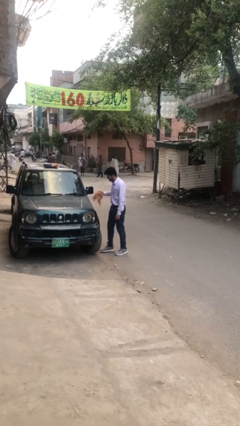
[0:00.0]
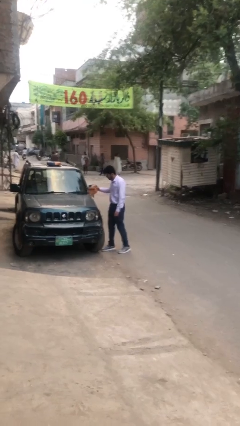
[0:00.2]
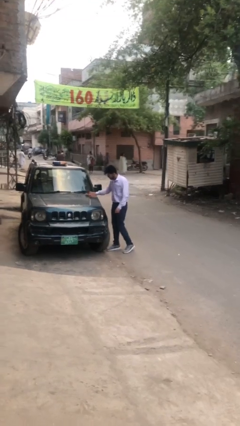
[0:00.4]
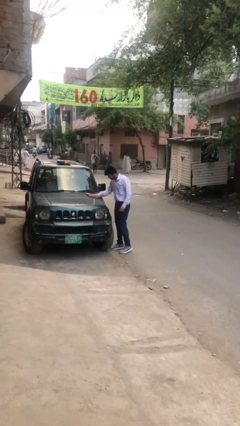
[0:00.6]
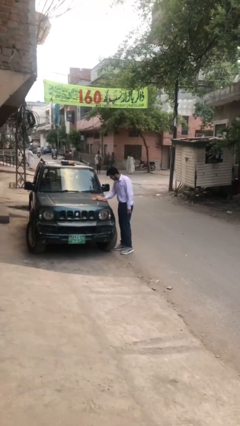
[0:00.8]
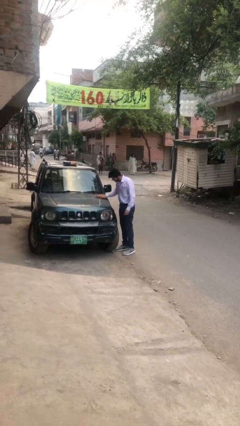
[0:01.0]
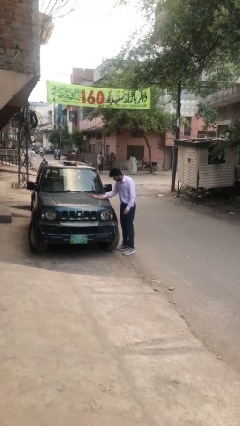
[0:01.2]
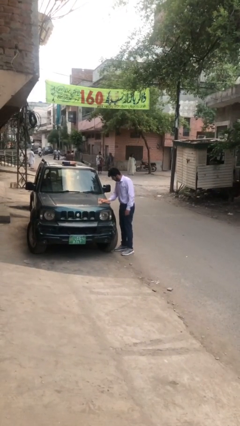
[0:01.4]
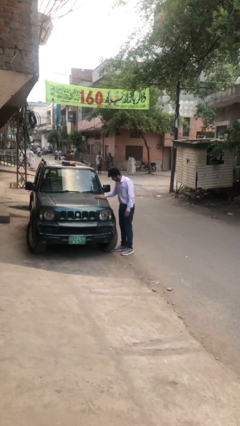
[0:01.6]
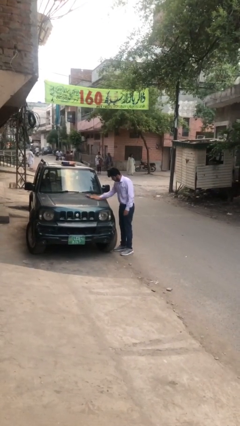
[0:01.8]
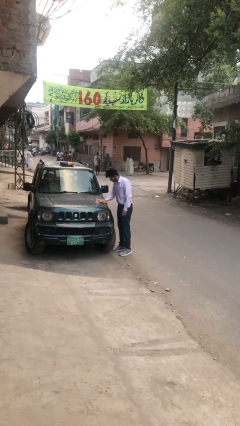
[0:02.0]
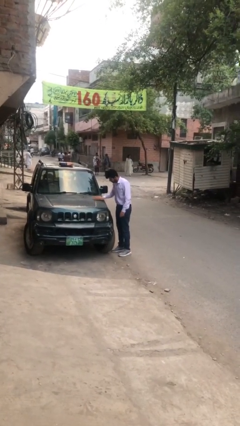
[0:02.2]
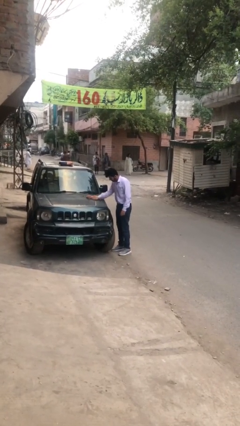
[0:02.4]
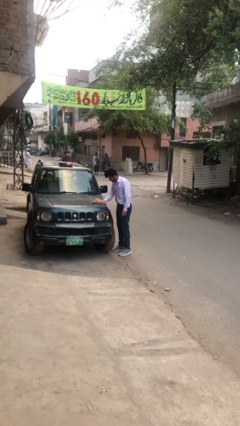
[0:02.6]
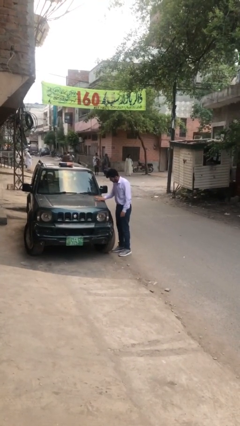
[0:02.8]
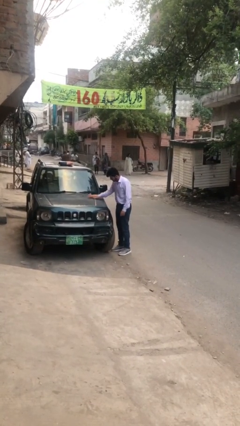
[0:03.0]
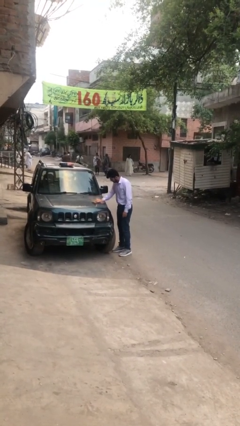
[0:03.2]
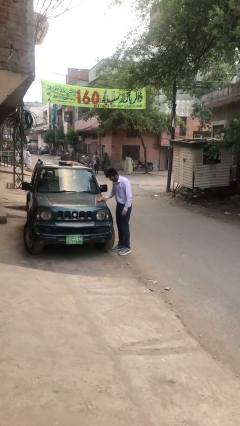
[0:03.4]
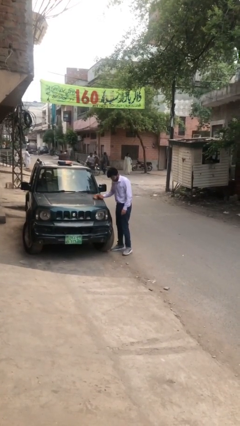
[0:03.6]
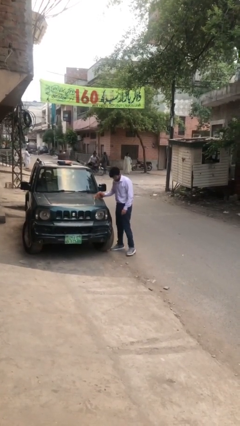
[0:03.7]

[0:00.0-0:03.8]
person polishes car with rag

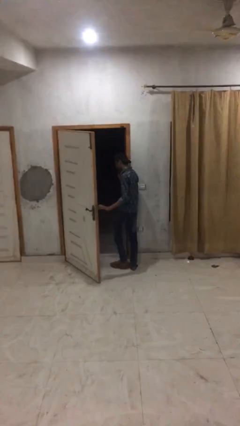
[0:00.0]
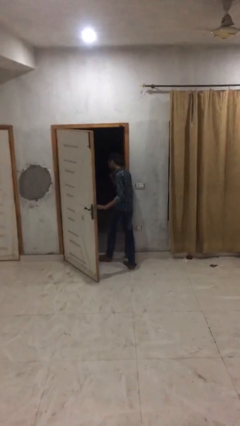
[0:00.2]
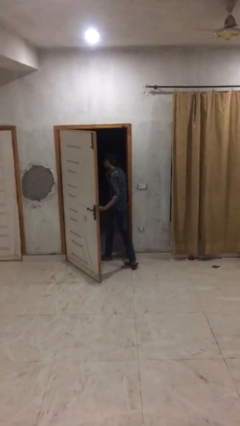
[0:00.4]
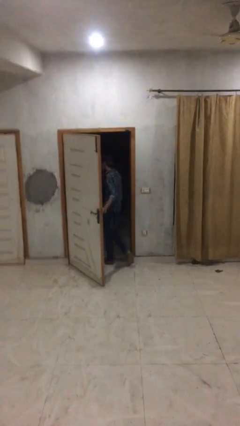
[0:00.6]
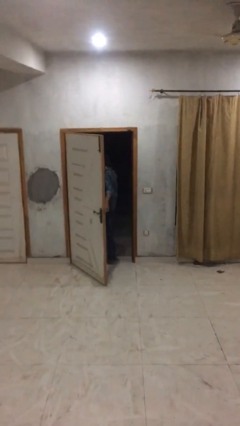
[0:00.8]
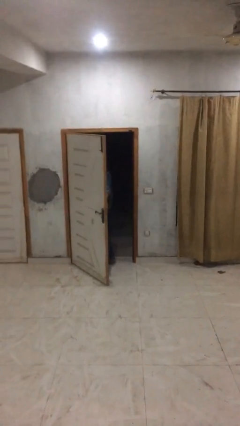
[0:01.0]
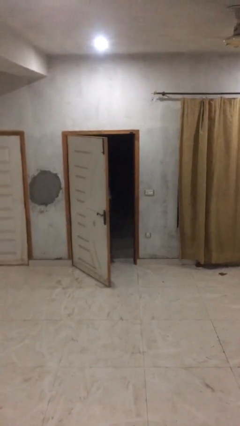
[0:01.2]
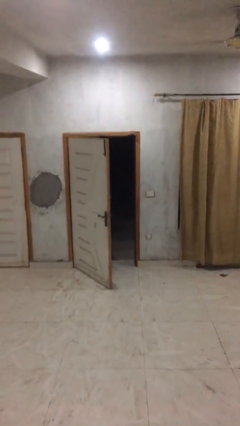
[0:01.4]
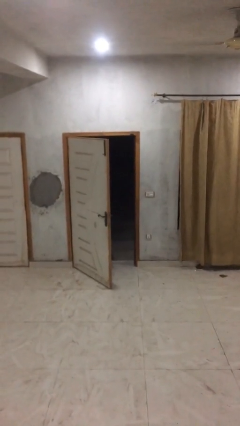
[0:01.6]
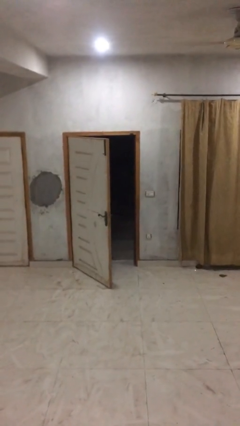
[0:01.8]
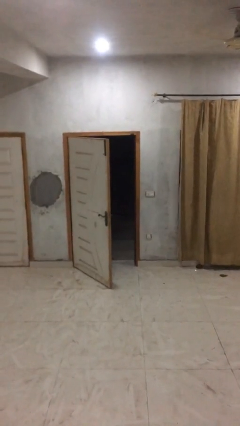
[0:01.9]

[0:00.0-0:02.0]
person exits scene through structure

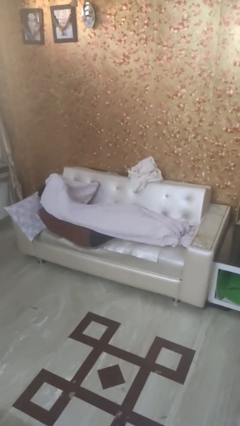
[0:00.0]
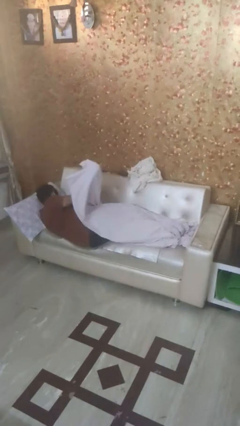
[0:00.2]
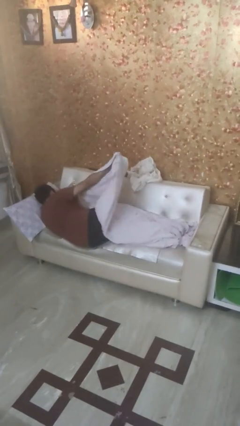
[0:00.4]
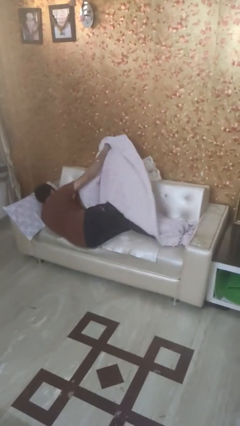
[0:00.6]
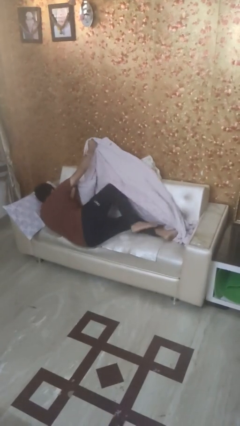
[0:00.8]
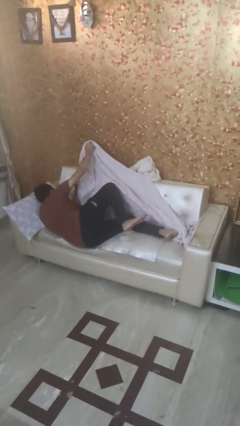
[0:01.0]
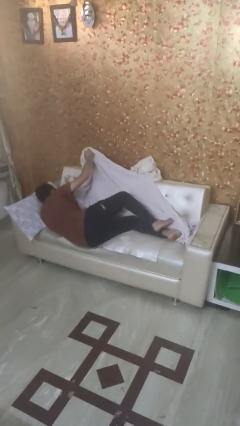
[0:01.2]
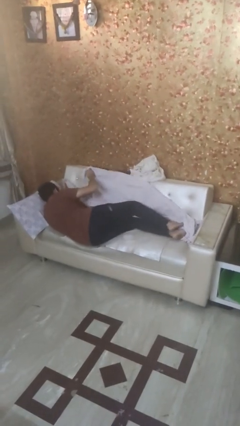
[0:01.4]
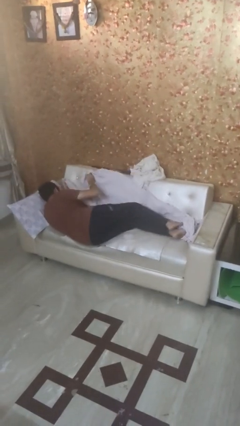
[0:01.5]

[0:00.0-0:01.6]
person uncovers with bedsheets

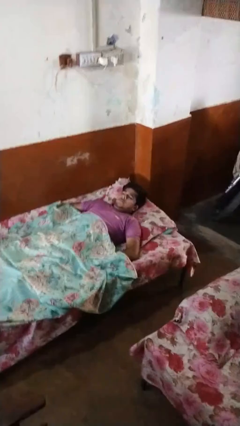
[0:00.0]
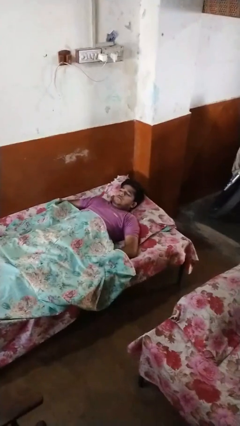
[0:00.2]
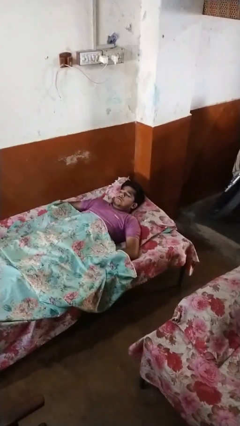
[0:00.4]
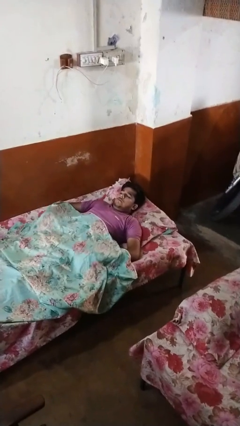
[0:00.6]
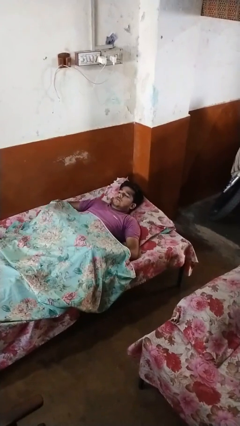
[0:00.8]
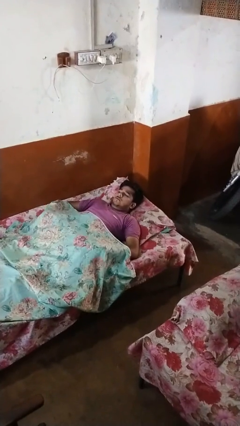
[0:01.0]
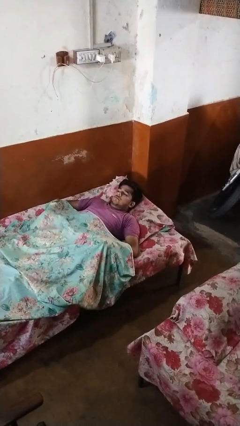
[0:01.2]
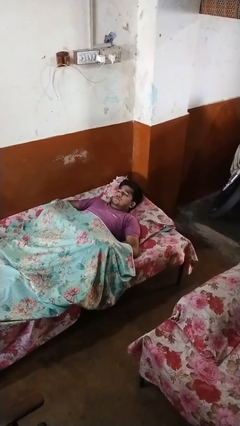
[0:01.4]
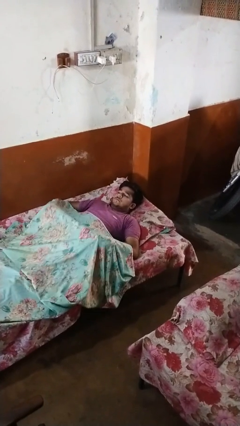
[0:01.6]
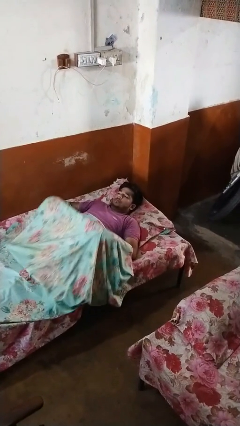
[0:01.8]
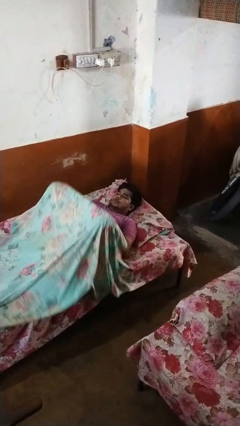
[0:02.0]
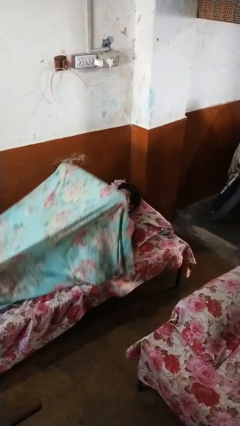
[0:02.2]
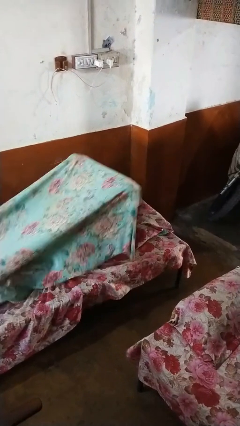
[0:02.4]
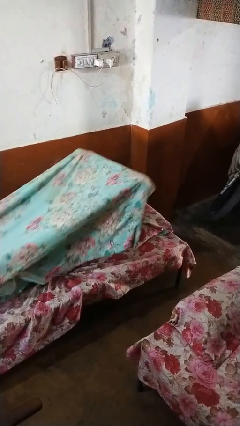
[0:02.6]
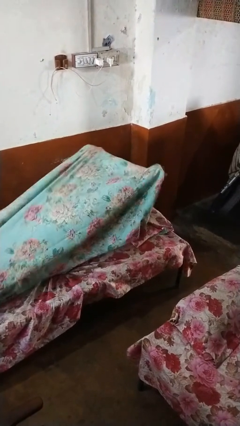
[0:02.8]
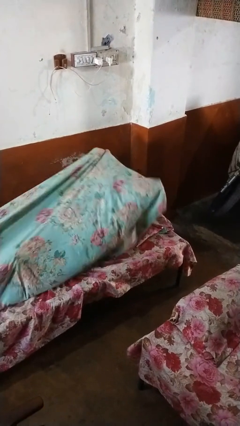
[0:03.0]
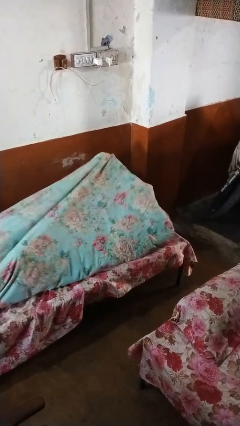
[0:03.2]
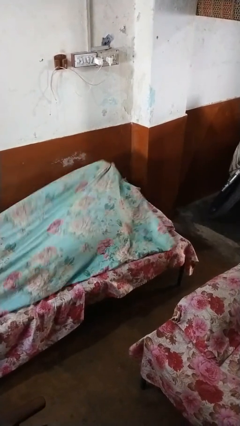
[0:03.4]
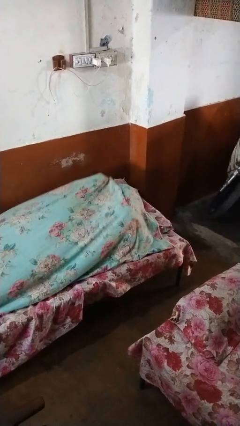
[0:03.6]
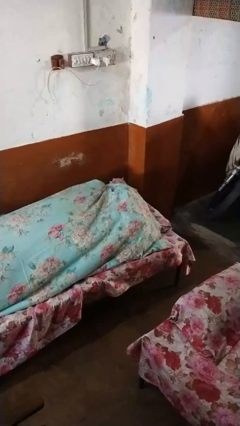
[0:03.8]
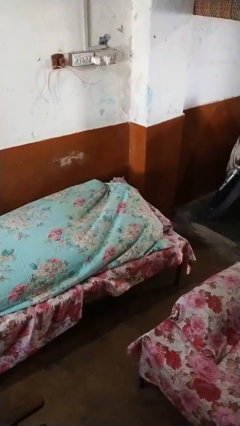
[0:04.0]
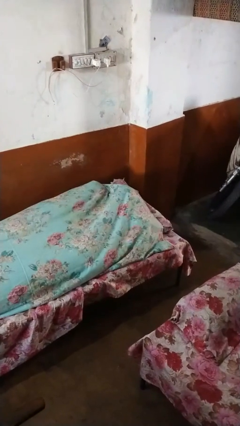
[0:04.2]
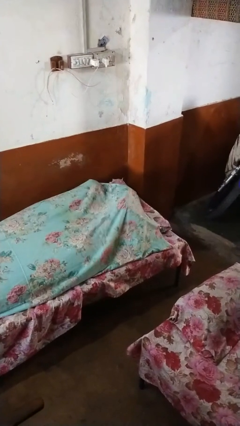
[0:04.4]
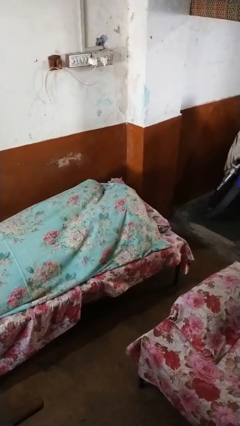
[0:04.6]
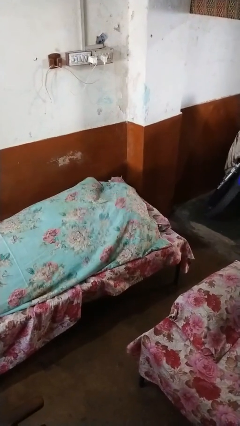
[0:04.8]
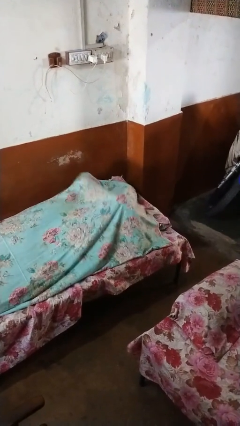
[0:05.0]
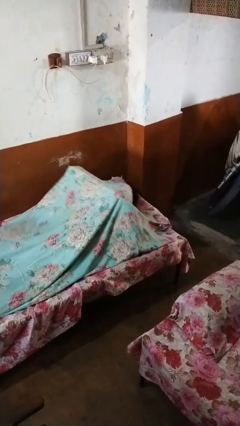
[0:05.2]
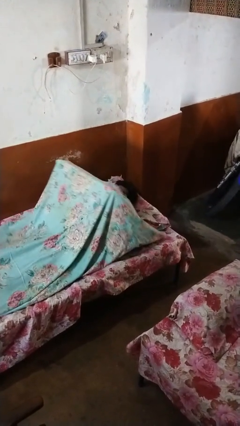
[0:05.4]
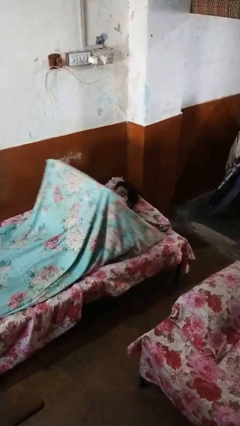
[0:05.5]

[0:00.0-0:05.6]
person covers with bedsheets

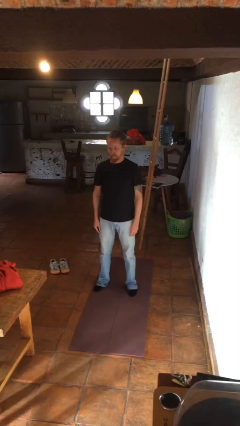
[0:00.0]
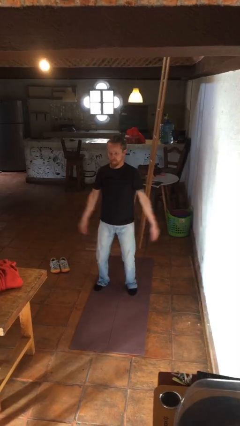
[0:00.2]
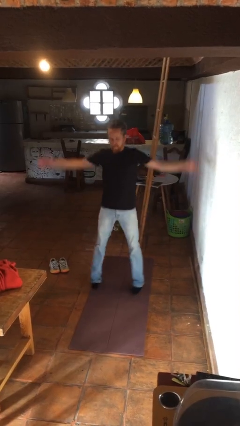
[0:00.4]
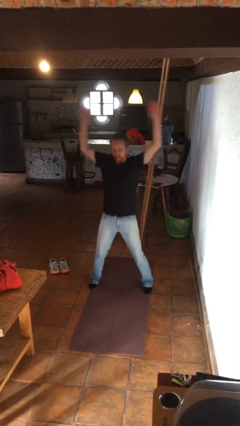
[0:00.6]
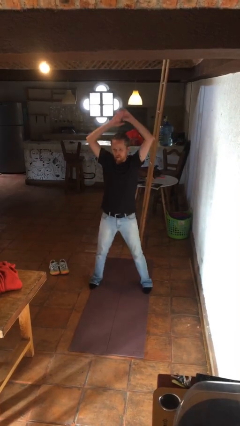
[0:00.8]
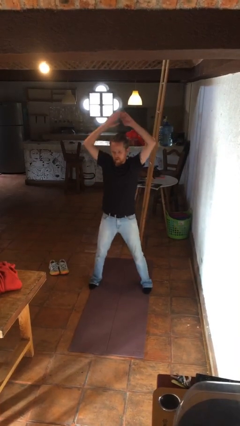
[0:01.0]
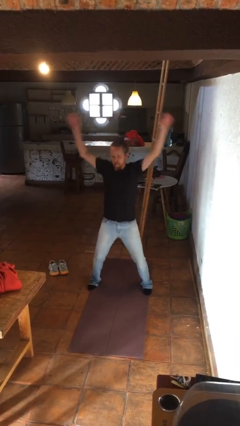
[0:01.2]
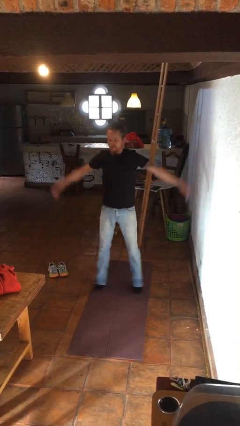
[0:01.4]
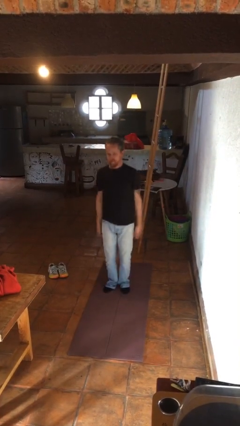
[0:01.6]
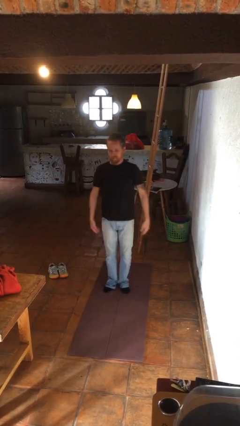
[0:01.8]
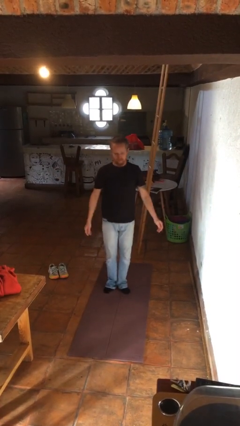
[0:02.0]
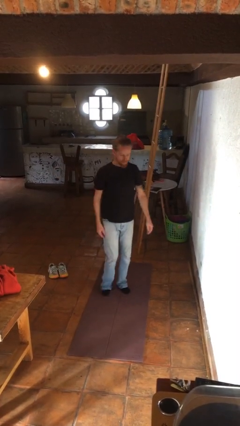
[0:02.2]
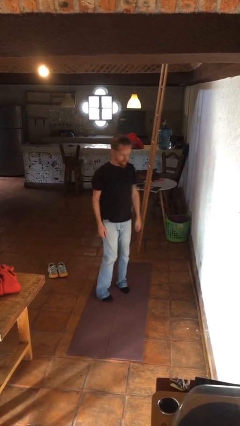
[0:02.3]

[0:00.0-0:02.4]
person exercises with jumping jacks

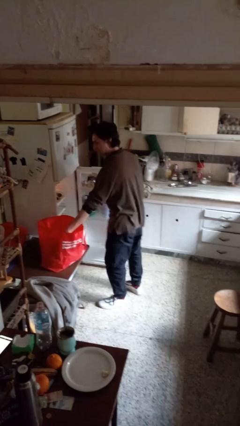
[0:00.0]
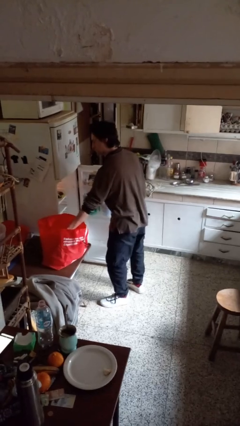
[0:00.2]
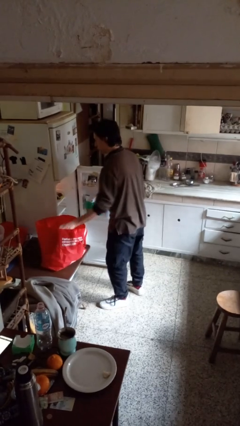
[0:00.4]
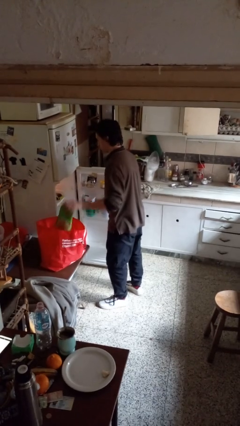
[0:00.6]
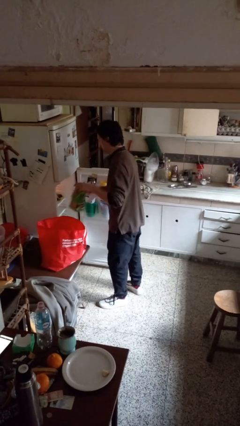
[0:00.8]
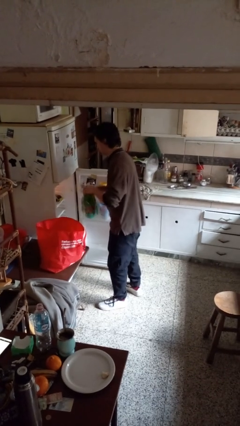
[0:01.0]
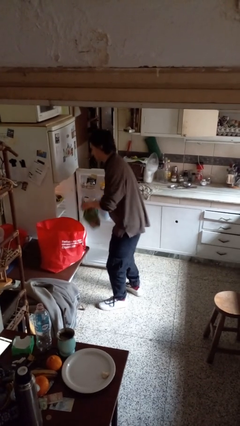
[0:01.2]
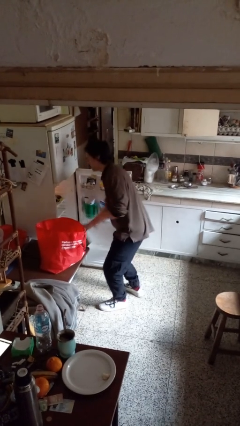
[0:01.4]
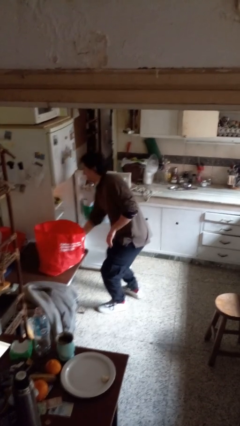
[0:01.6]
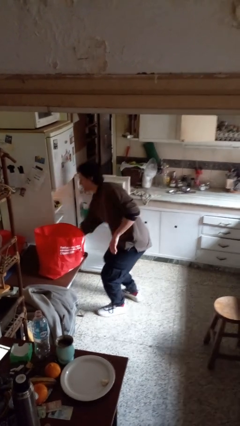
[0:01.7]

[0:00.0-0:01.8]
person loads groceries into refrigerator

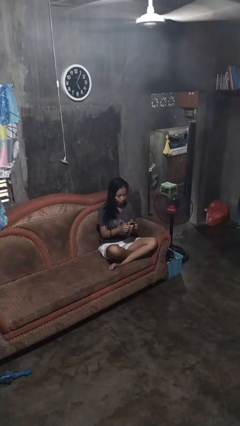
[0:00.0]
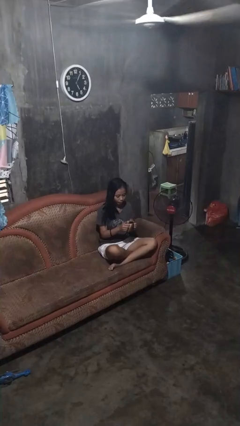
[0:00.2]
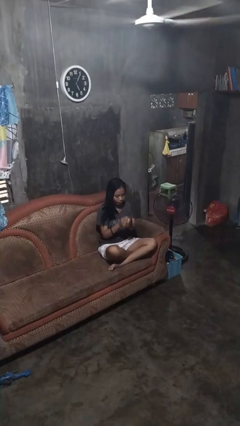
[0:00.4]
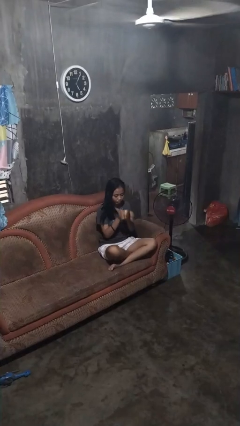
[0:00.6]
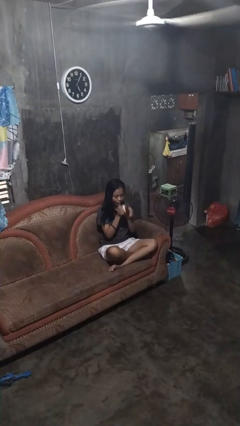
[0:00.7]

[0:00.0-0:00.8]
person drinks from mug
